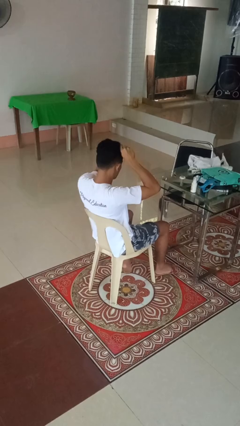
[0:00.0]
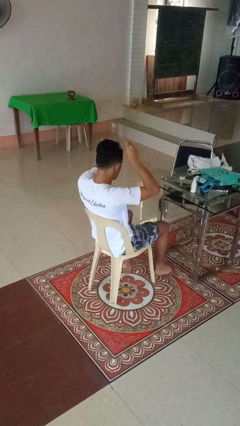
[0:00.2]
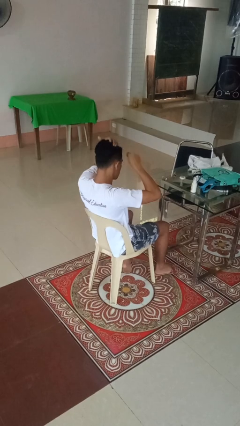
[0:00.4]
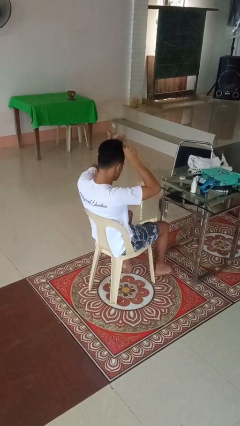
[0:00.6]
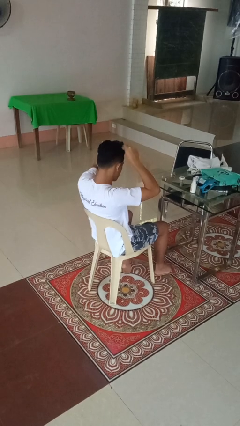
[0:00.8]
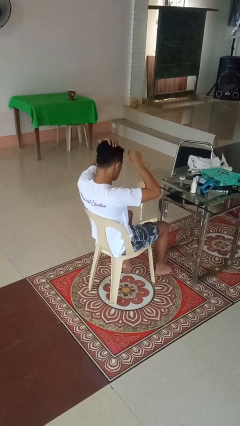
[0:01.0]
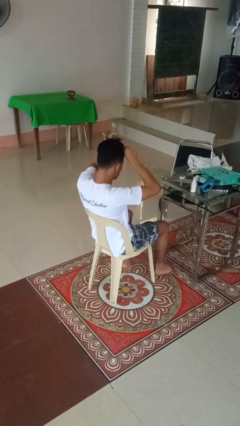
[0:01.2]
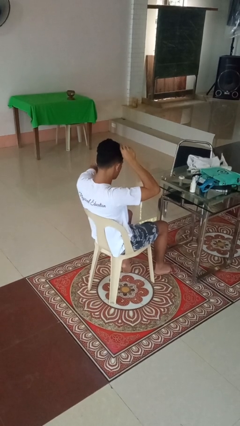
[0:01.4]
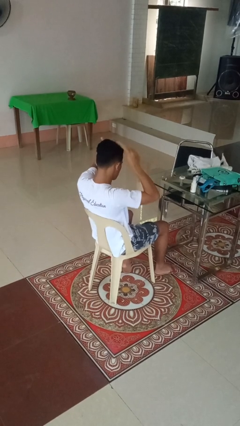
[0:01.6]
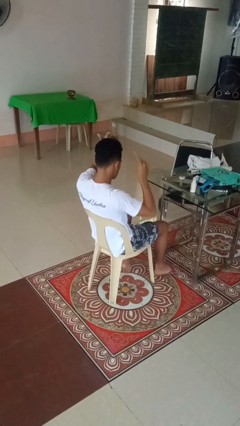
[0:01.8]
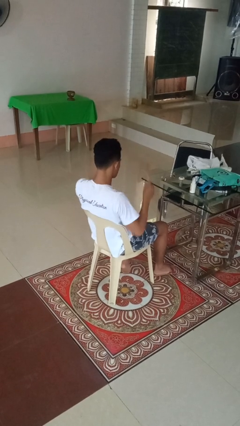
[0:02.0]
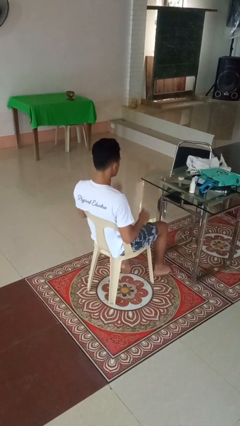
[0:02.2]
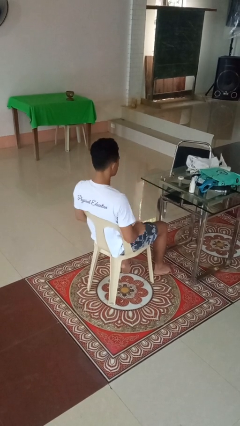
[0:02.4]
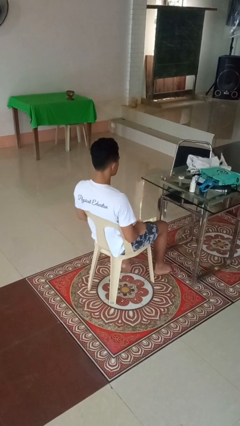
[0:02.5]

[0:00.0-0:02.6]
person brushes hair

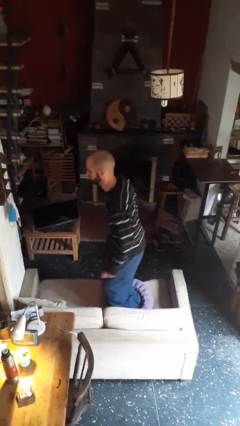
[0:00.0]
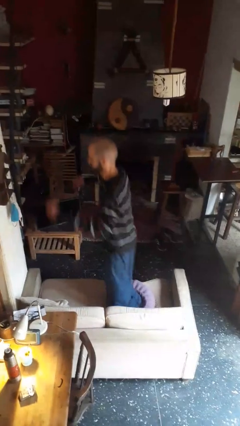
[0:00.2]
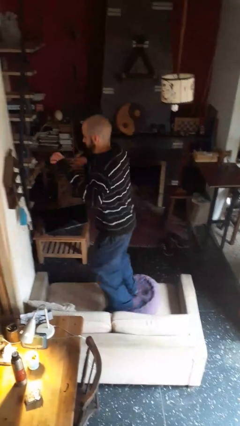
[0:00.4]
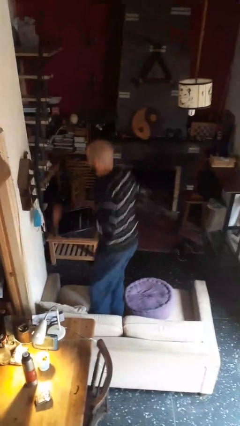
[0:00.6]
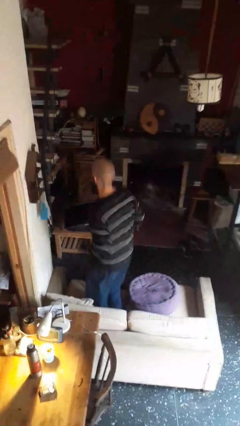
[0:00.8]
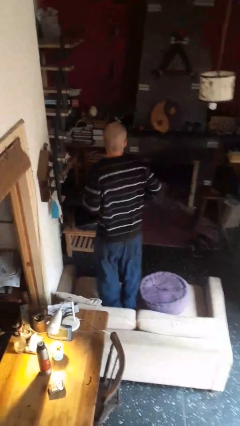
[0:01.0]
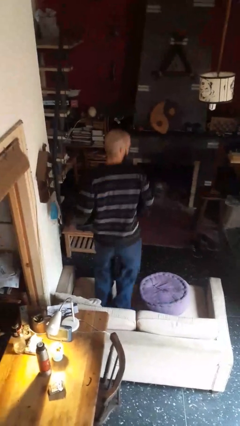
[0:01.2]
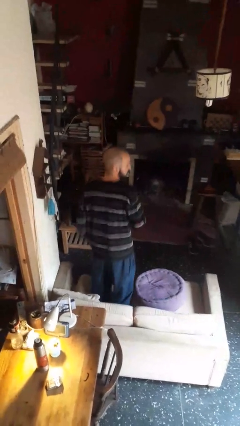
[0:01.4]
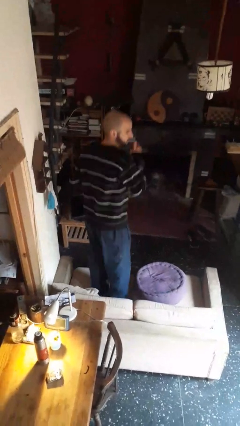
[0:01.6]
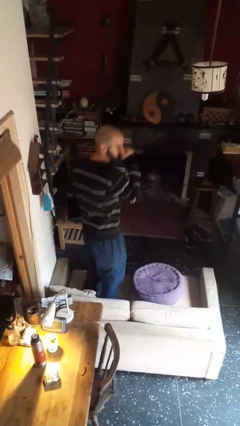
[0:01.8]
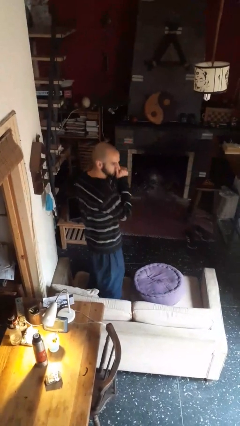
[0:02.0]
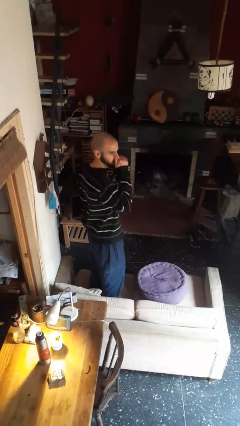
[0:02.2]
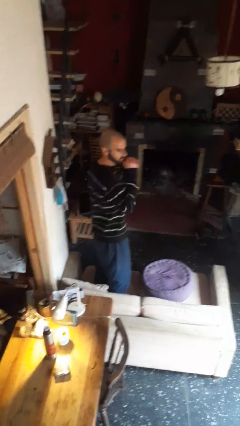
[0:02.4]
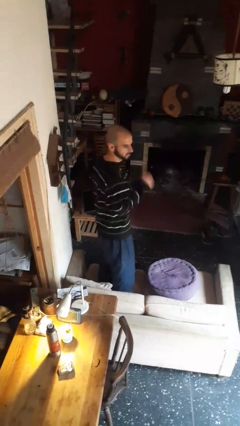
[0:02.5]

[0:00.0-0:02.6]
person jumps on couch

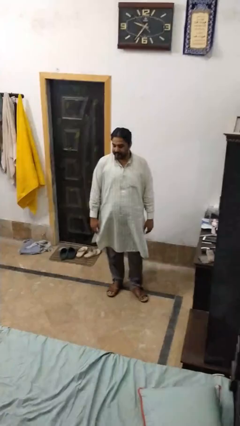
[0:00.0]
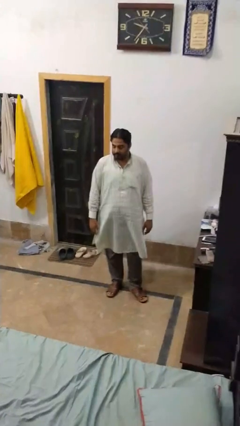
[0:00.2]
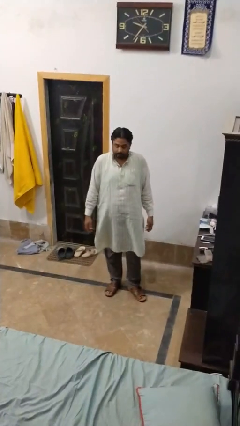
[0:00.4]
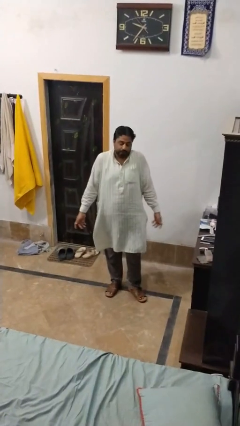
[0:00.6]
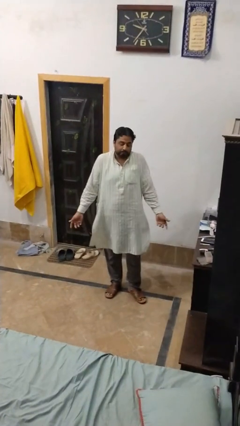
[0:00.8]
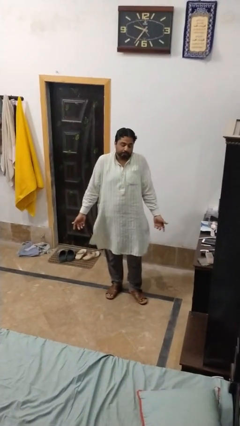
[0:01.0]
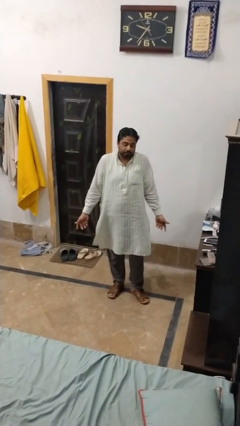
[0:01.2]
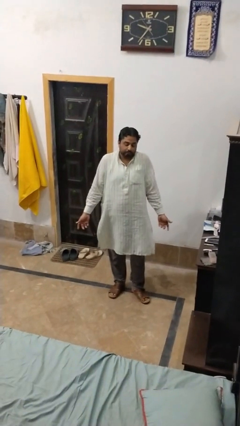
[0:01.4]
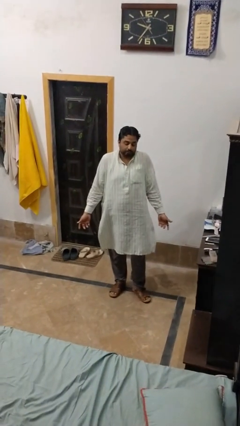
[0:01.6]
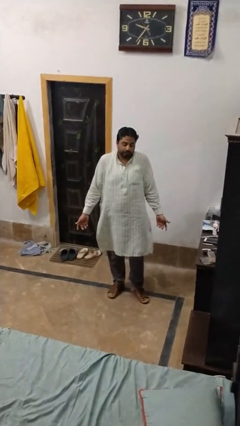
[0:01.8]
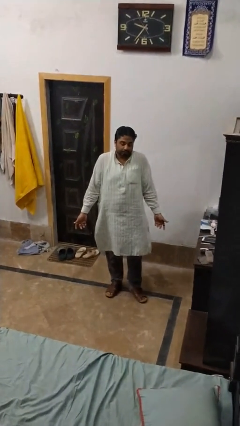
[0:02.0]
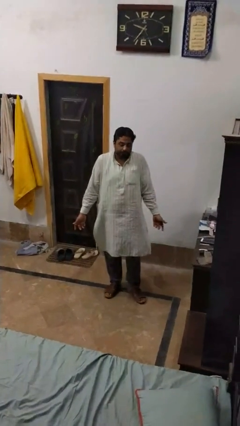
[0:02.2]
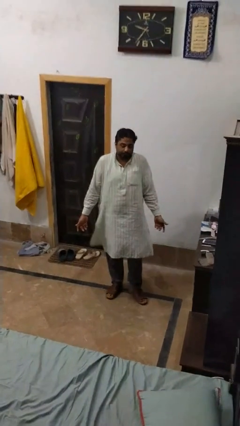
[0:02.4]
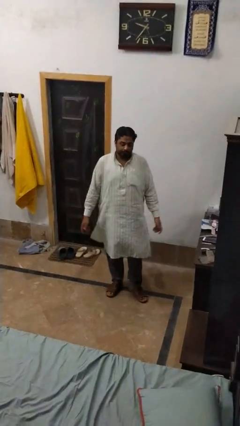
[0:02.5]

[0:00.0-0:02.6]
person shrugs

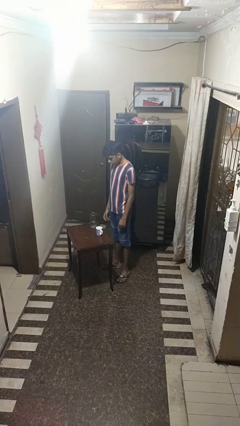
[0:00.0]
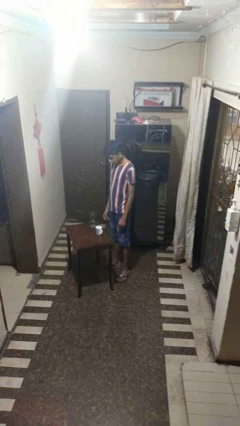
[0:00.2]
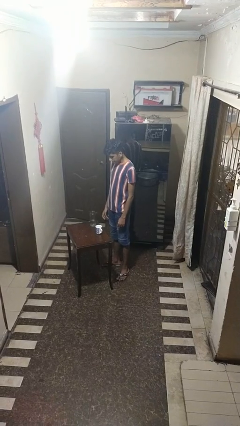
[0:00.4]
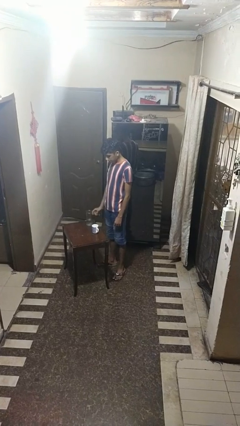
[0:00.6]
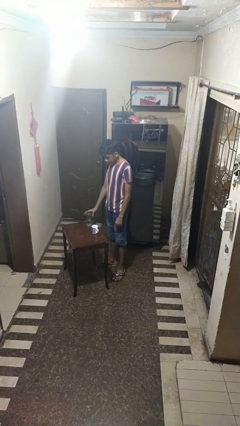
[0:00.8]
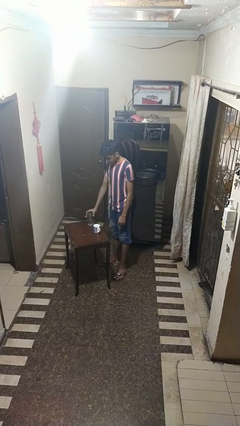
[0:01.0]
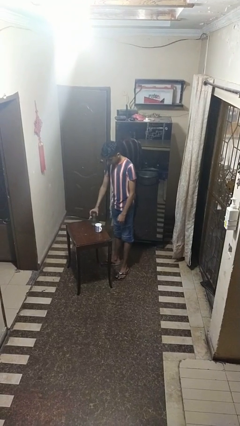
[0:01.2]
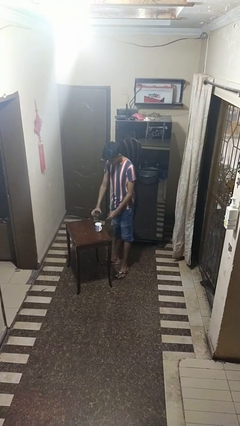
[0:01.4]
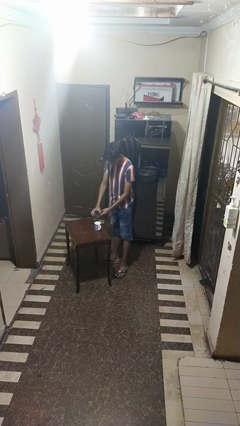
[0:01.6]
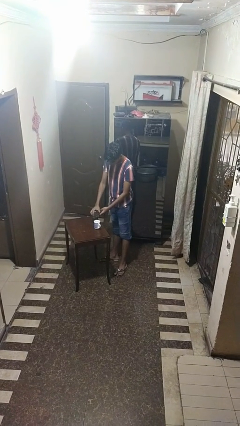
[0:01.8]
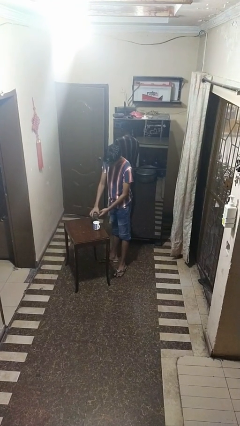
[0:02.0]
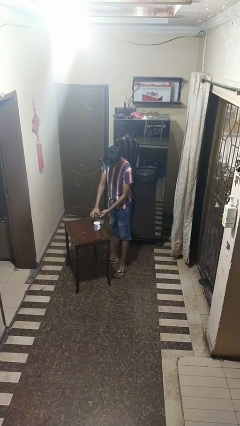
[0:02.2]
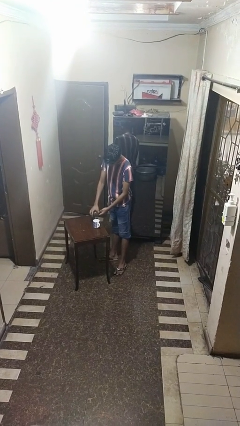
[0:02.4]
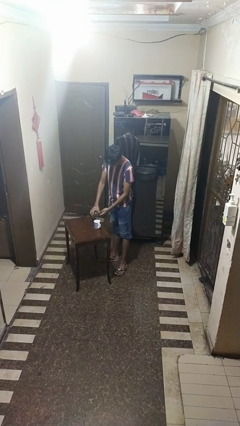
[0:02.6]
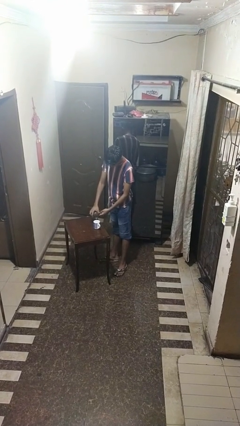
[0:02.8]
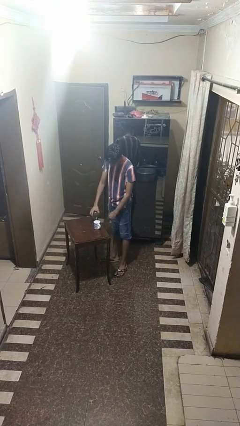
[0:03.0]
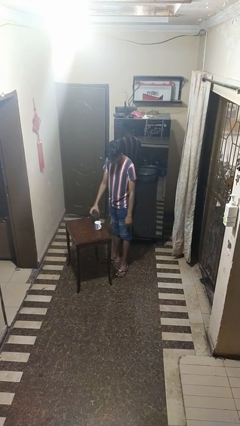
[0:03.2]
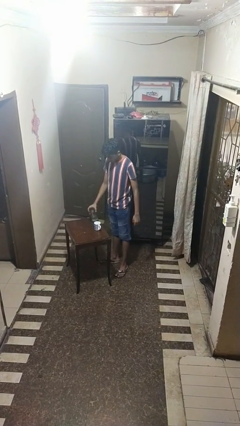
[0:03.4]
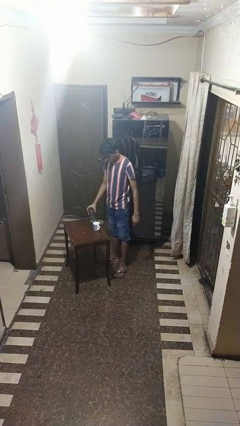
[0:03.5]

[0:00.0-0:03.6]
person pours liquid into cup

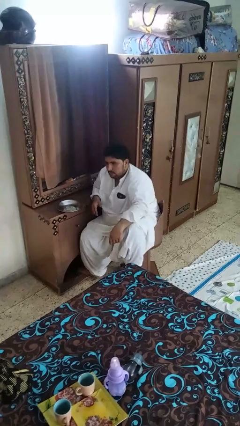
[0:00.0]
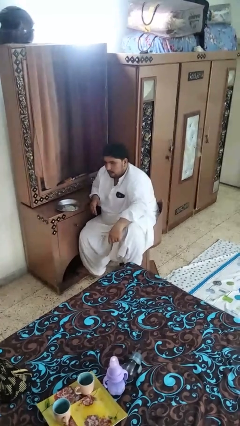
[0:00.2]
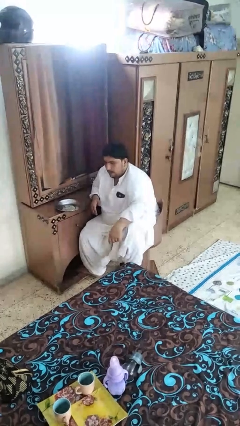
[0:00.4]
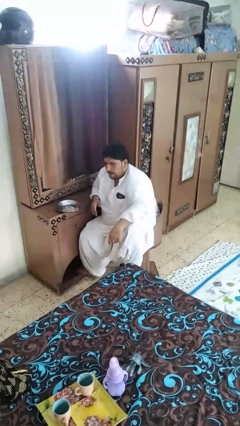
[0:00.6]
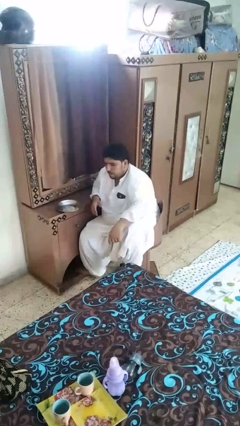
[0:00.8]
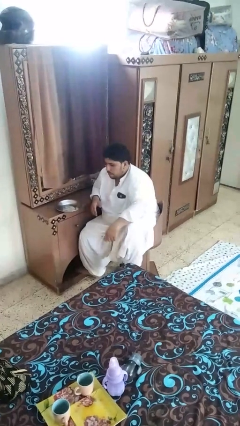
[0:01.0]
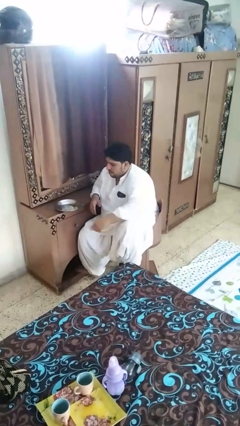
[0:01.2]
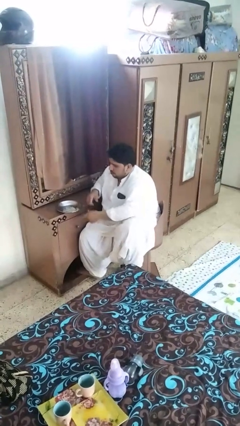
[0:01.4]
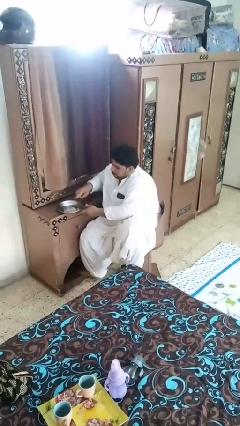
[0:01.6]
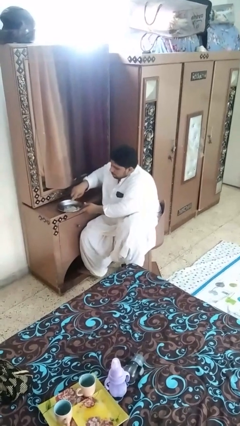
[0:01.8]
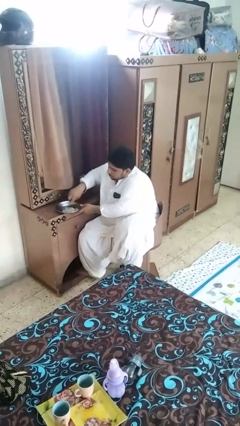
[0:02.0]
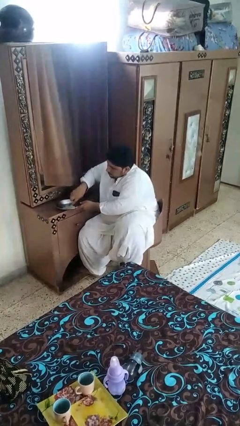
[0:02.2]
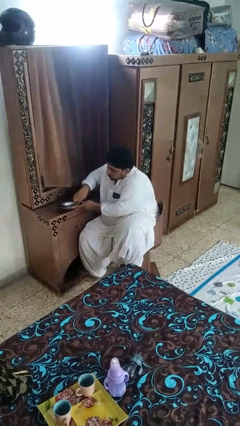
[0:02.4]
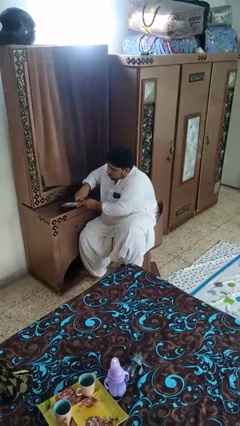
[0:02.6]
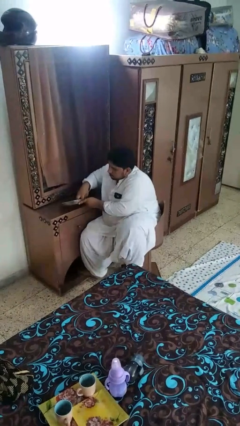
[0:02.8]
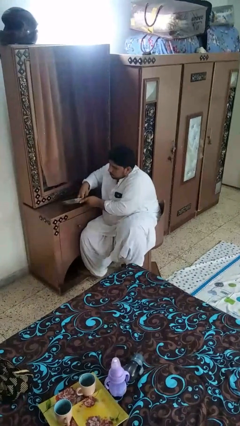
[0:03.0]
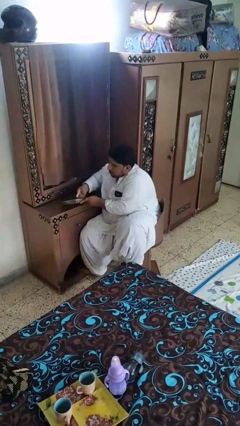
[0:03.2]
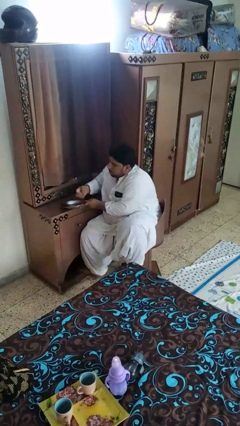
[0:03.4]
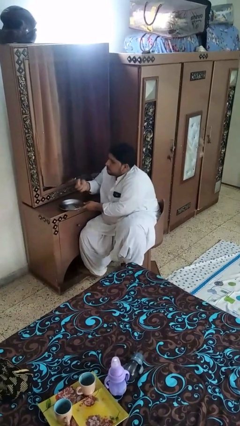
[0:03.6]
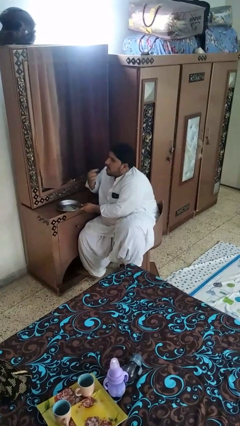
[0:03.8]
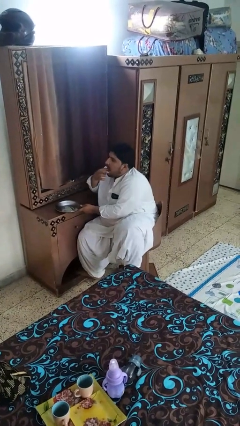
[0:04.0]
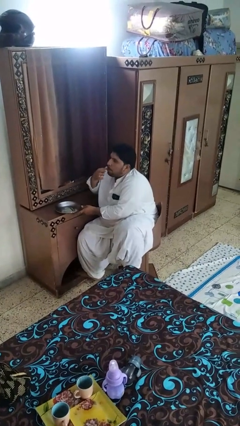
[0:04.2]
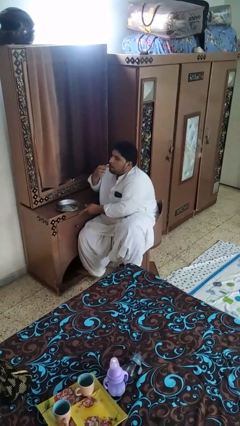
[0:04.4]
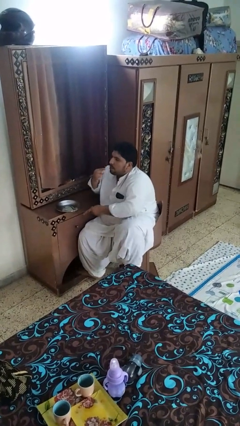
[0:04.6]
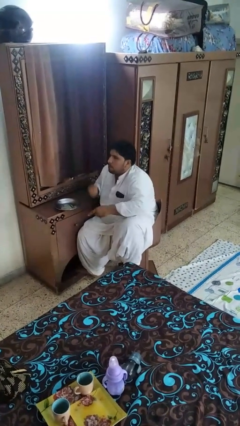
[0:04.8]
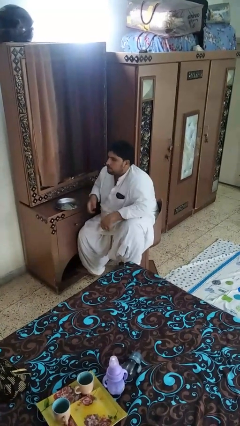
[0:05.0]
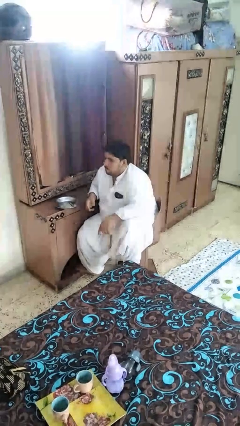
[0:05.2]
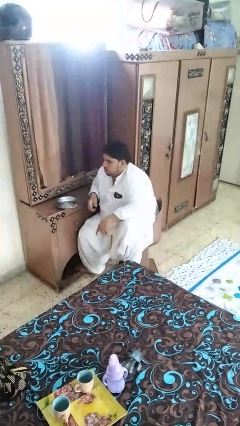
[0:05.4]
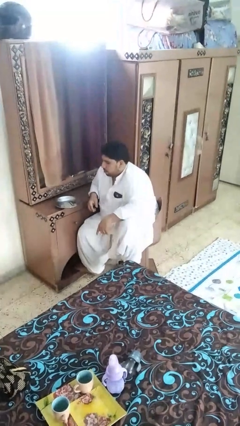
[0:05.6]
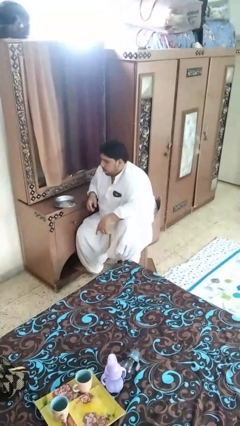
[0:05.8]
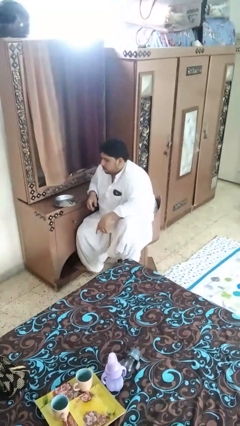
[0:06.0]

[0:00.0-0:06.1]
person eats with hands
